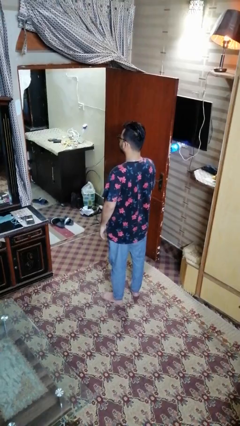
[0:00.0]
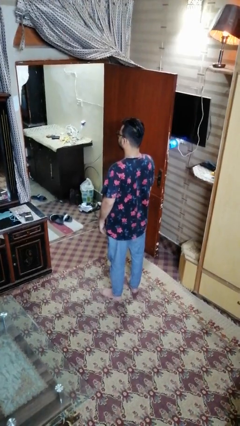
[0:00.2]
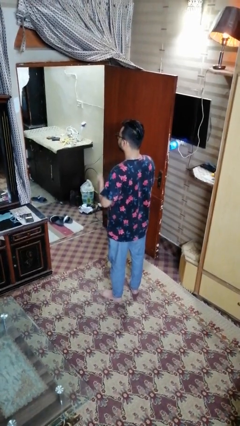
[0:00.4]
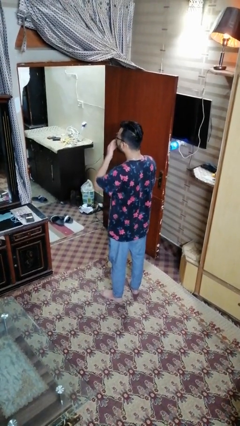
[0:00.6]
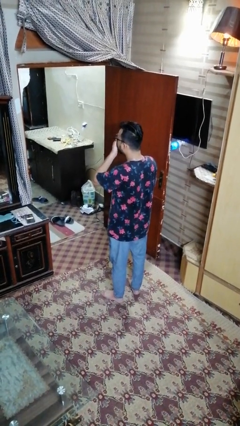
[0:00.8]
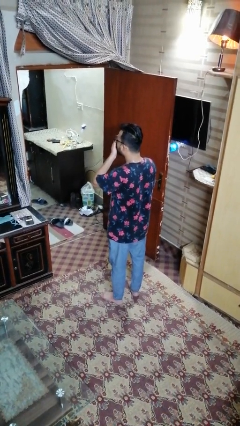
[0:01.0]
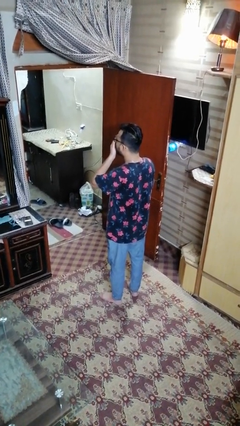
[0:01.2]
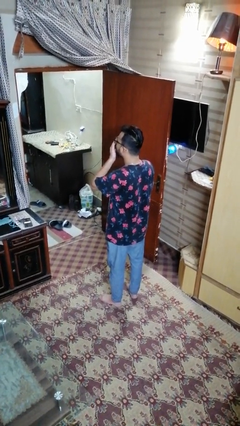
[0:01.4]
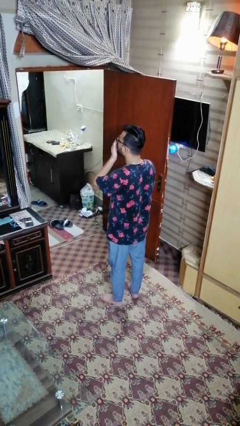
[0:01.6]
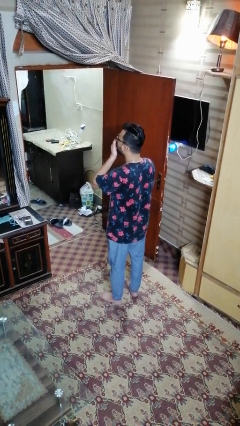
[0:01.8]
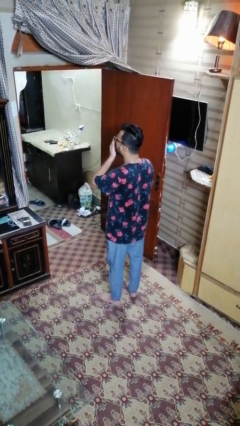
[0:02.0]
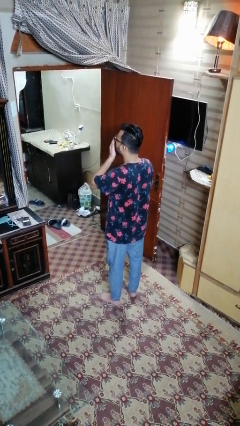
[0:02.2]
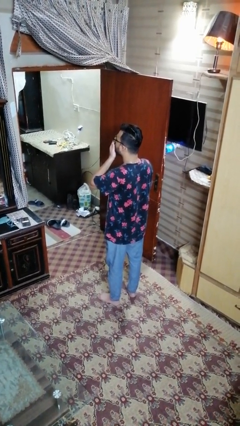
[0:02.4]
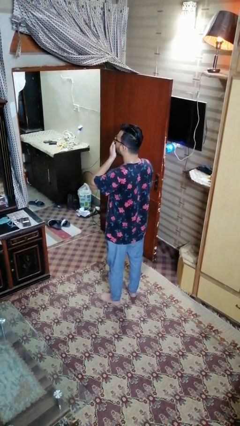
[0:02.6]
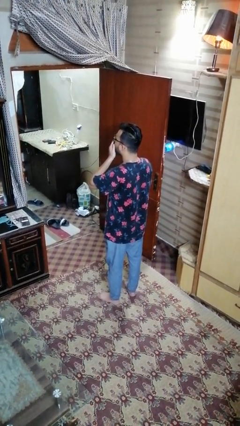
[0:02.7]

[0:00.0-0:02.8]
person yawns

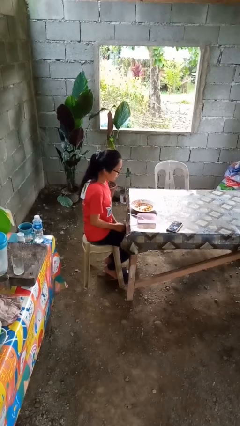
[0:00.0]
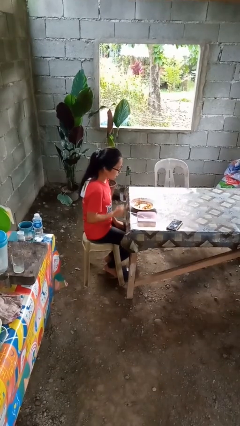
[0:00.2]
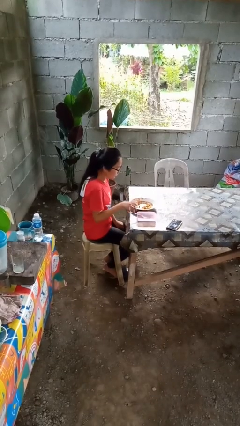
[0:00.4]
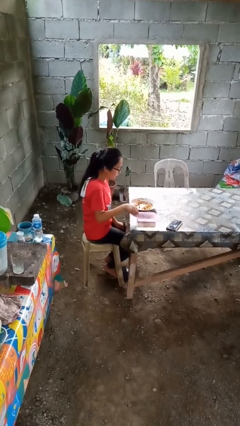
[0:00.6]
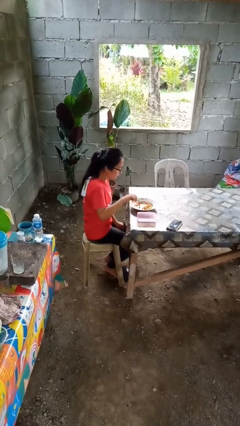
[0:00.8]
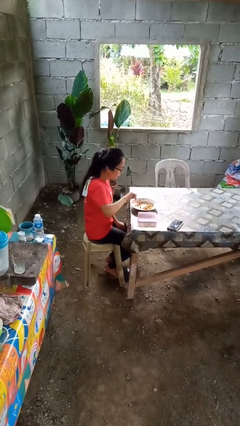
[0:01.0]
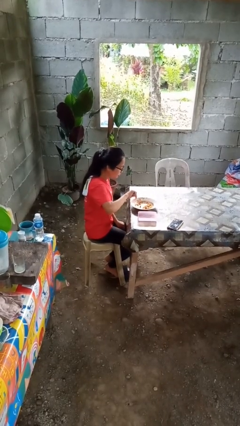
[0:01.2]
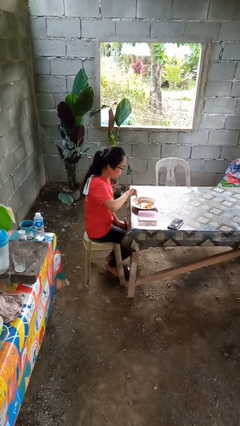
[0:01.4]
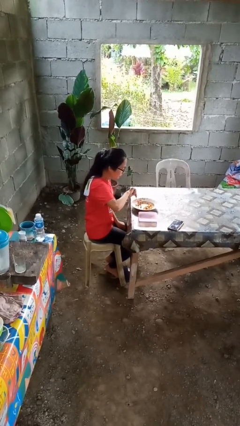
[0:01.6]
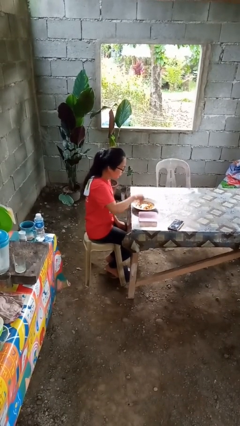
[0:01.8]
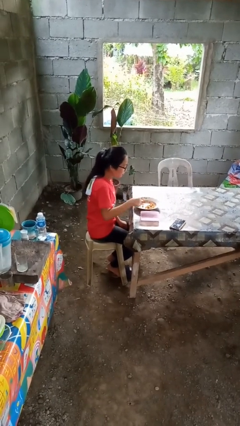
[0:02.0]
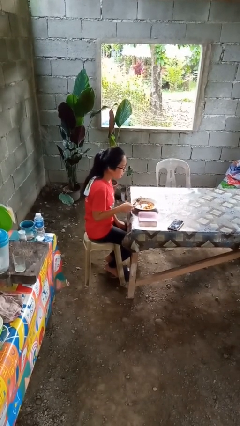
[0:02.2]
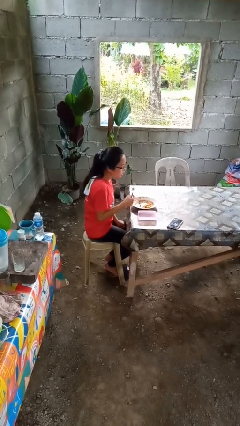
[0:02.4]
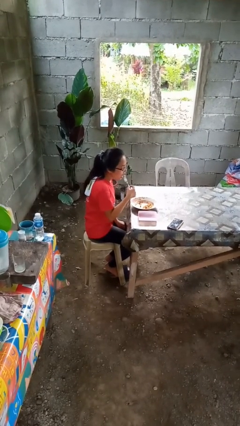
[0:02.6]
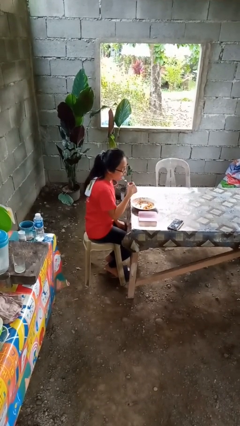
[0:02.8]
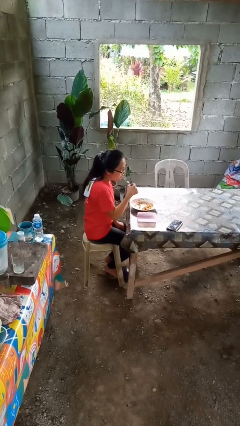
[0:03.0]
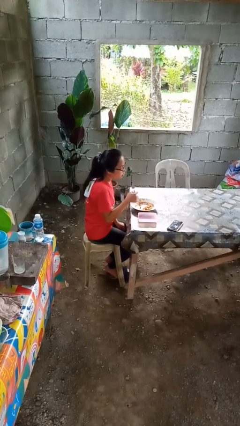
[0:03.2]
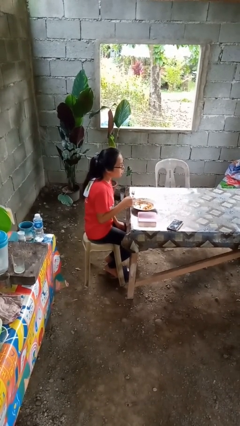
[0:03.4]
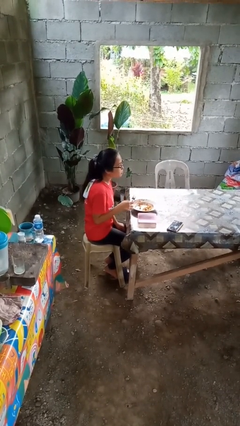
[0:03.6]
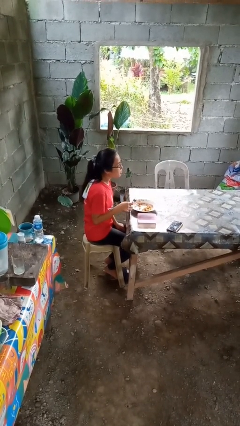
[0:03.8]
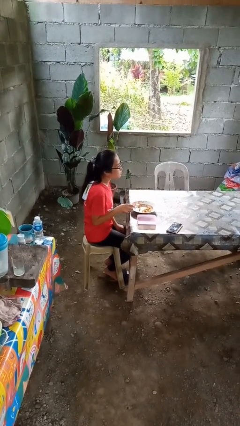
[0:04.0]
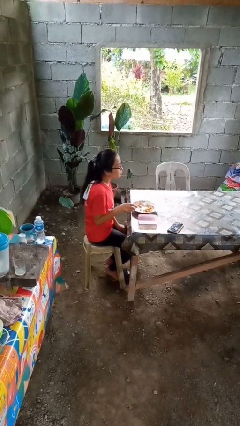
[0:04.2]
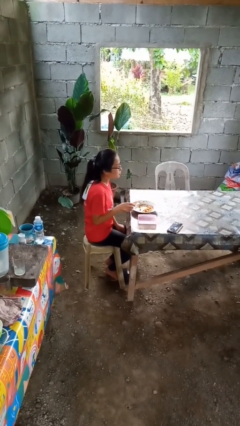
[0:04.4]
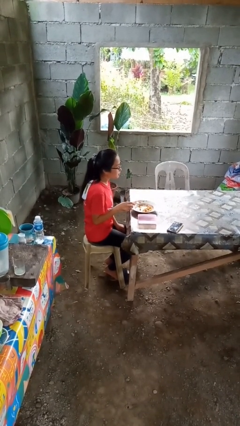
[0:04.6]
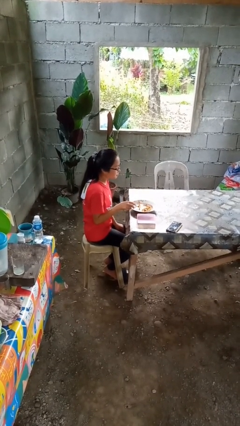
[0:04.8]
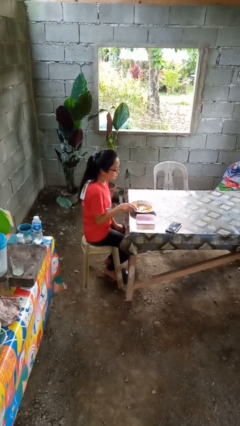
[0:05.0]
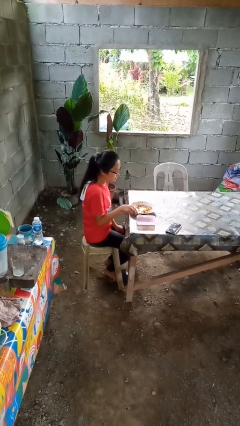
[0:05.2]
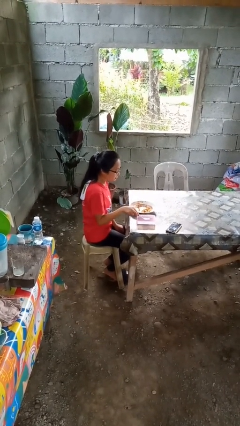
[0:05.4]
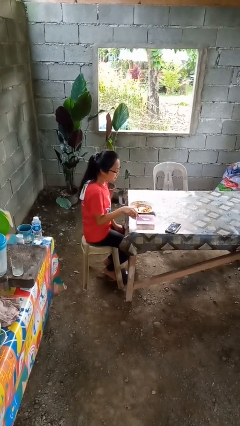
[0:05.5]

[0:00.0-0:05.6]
person eats with utensil

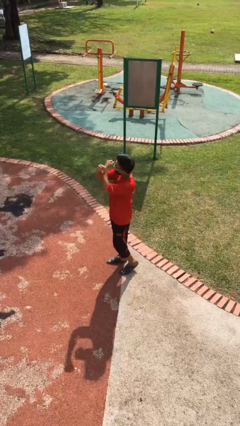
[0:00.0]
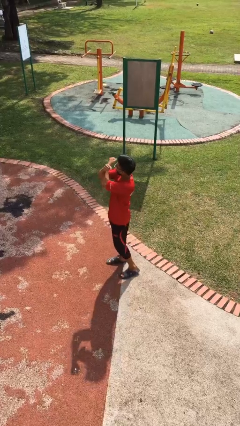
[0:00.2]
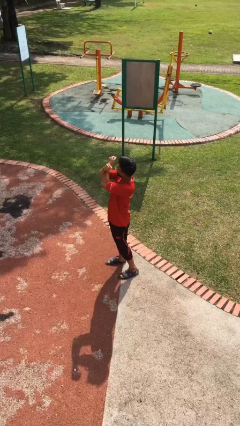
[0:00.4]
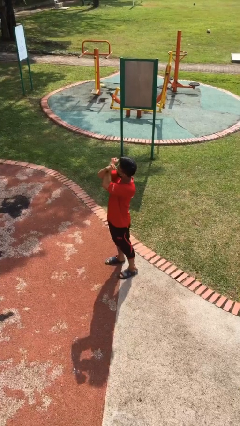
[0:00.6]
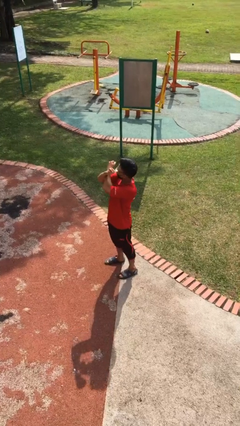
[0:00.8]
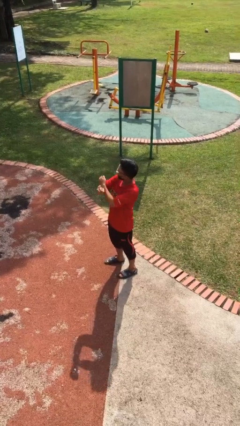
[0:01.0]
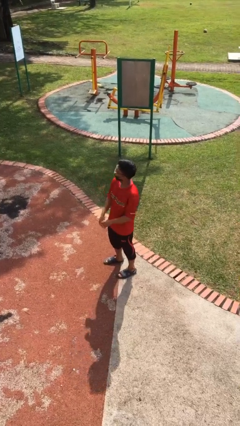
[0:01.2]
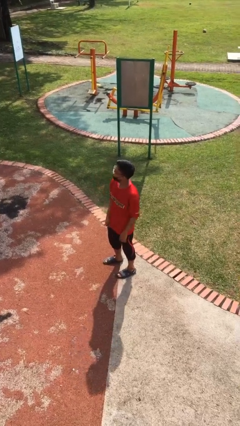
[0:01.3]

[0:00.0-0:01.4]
person gestures arms x

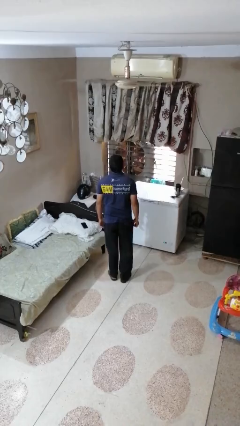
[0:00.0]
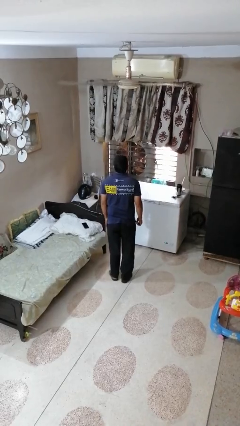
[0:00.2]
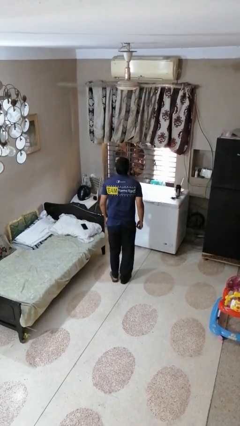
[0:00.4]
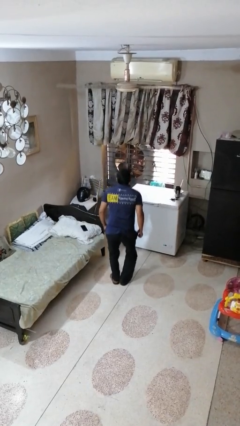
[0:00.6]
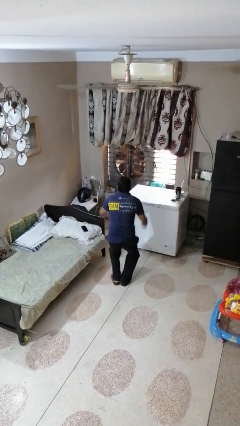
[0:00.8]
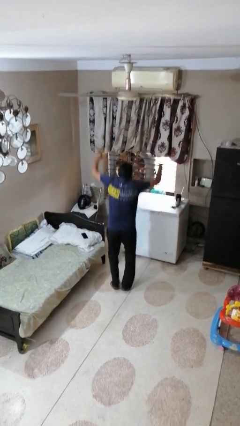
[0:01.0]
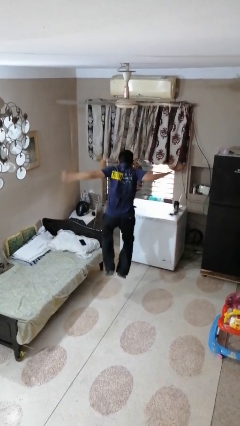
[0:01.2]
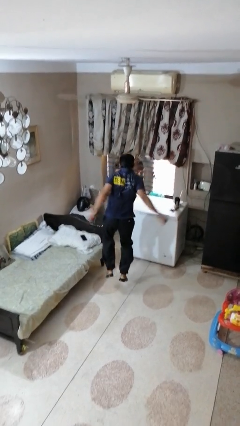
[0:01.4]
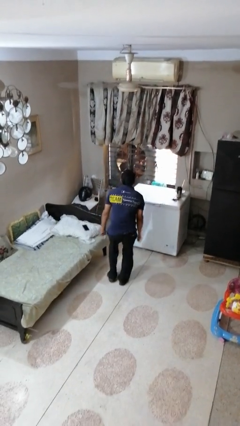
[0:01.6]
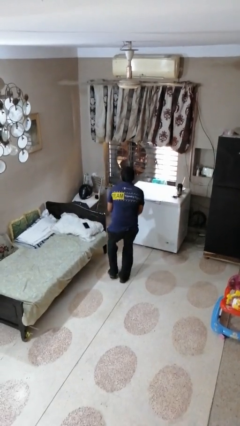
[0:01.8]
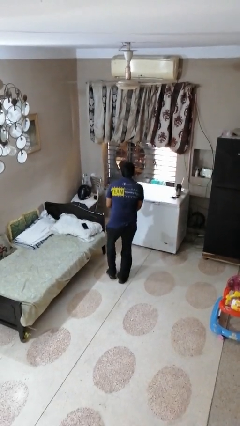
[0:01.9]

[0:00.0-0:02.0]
person jumps

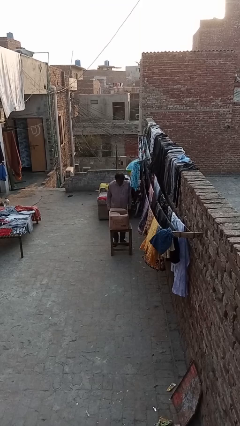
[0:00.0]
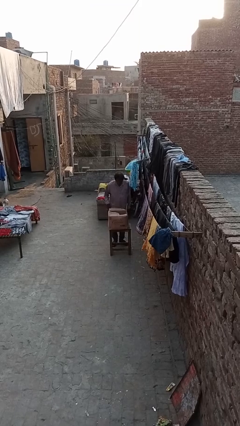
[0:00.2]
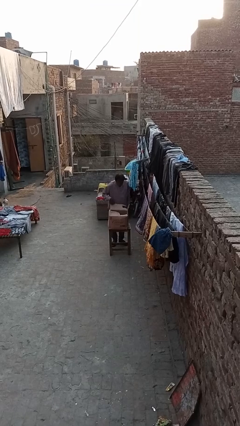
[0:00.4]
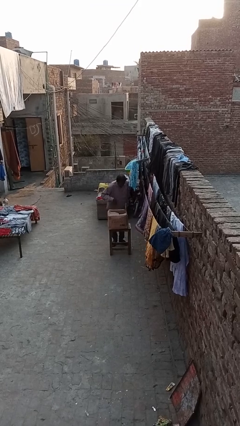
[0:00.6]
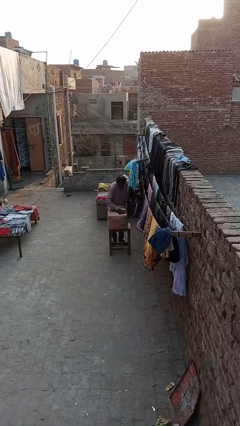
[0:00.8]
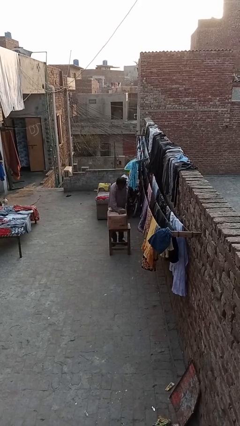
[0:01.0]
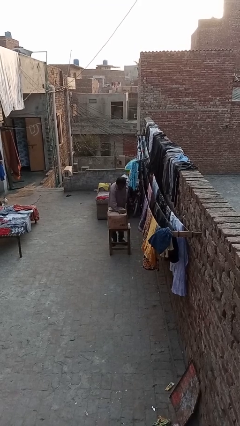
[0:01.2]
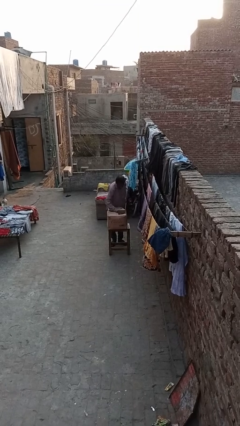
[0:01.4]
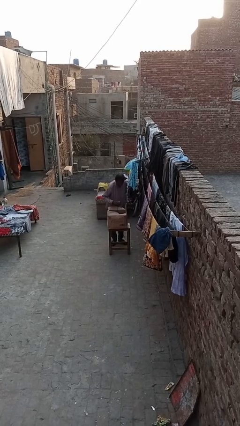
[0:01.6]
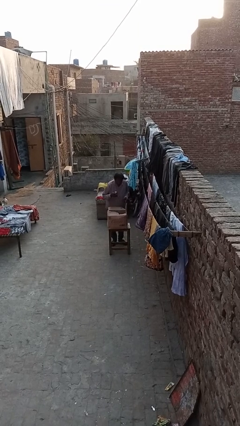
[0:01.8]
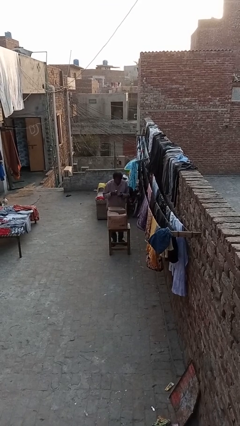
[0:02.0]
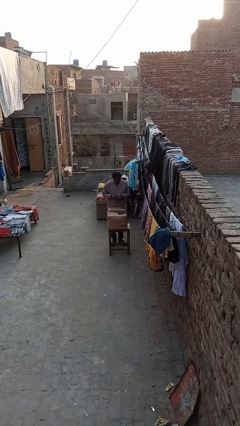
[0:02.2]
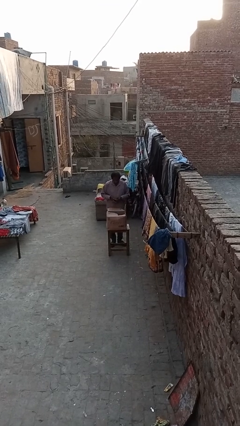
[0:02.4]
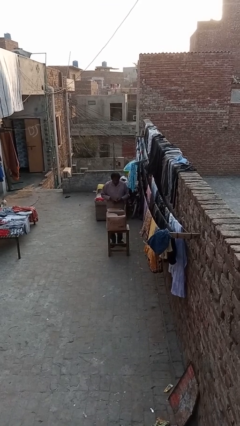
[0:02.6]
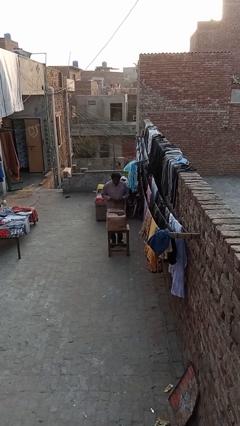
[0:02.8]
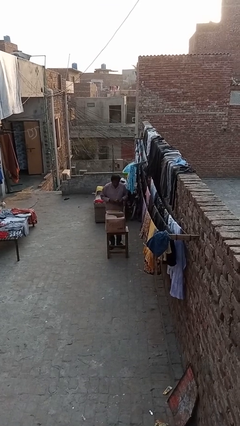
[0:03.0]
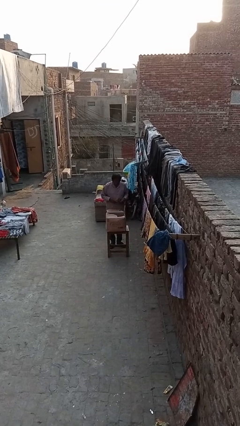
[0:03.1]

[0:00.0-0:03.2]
person takes object from box

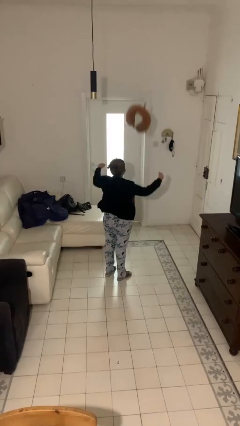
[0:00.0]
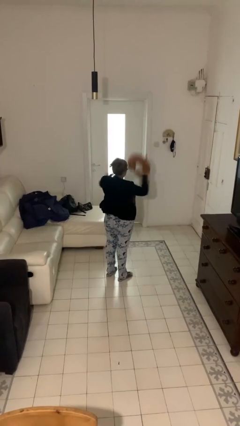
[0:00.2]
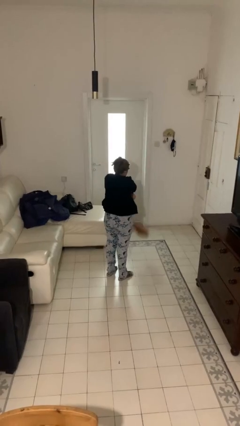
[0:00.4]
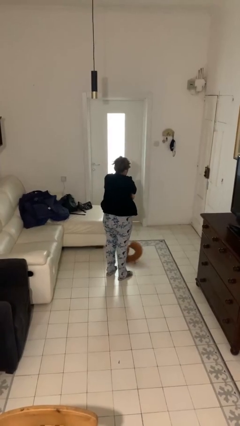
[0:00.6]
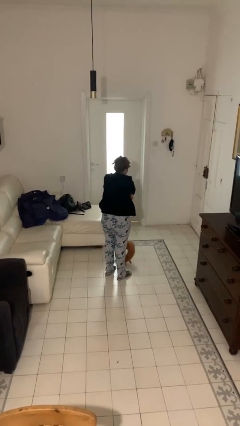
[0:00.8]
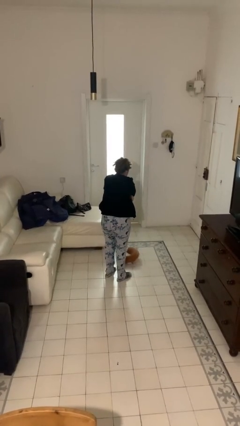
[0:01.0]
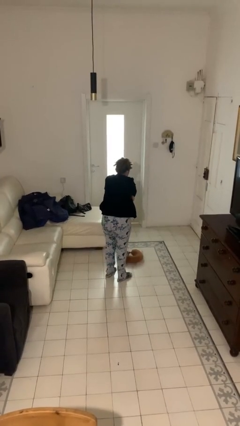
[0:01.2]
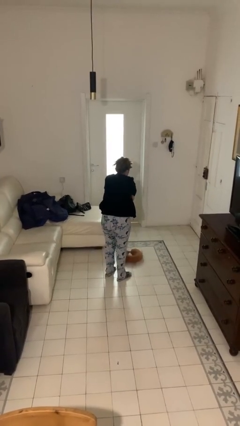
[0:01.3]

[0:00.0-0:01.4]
person catches dropped object

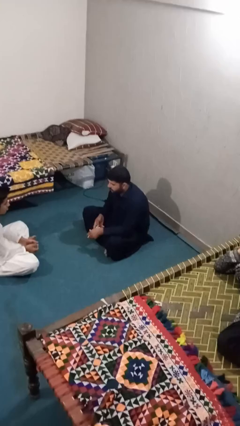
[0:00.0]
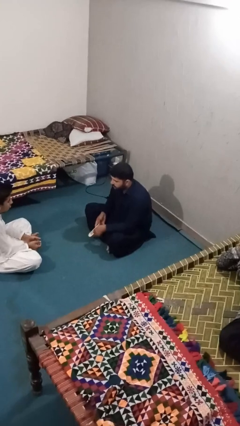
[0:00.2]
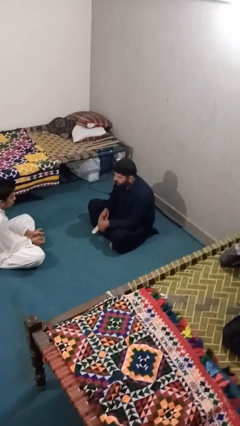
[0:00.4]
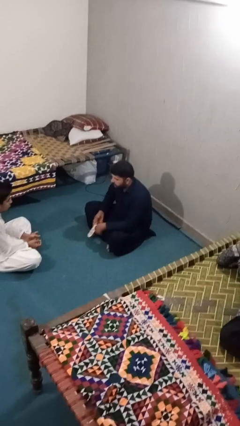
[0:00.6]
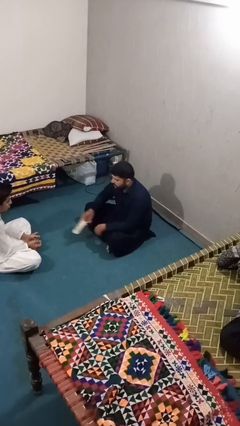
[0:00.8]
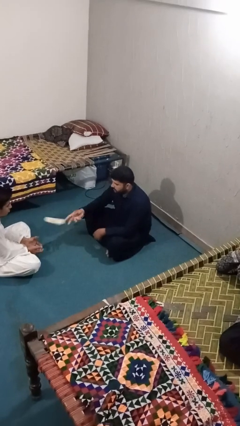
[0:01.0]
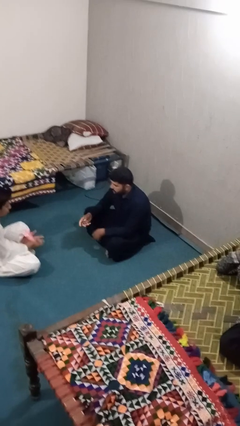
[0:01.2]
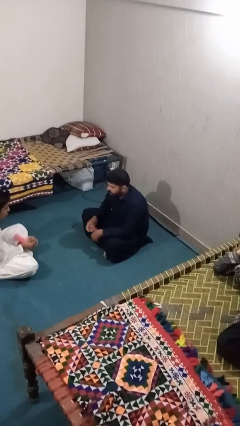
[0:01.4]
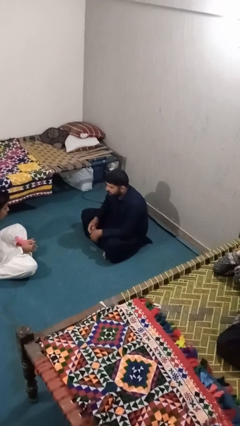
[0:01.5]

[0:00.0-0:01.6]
person throws object to person
